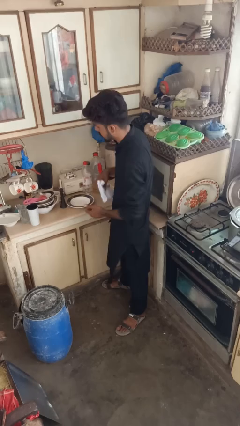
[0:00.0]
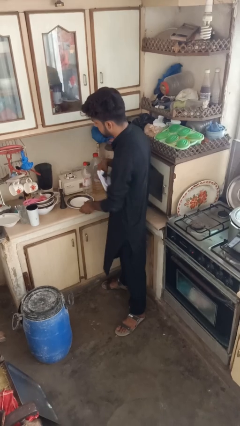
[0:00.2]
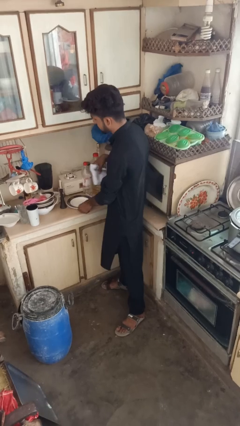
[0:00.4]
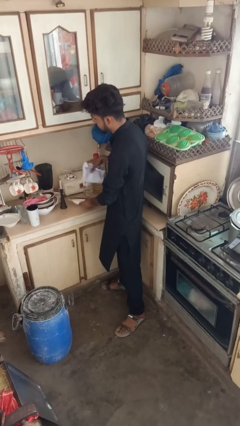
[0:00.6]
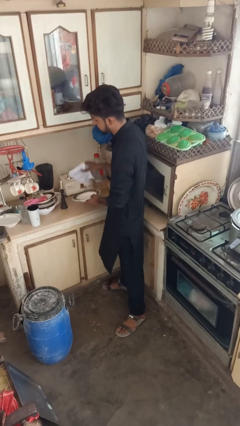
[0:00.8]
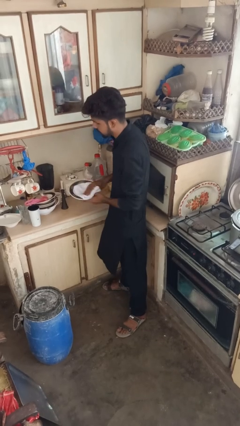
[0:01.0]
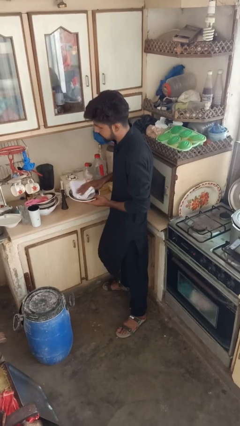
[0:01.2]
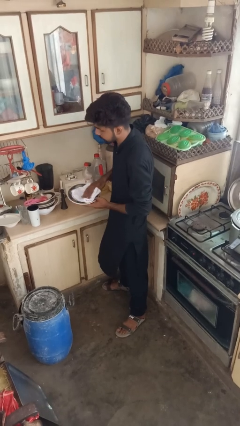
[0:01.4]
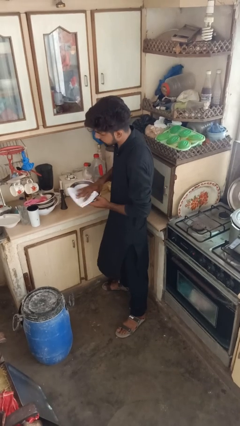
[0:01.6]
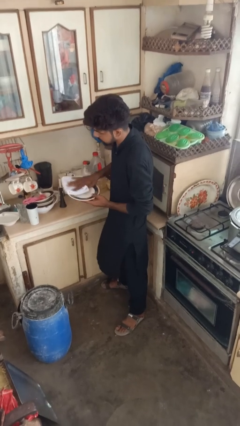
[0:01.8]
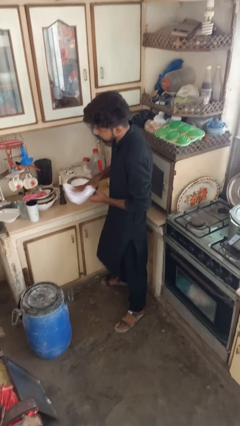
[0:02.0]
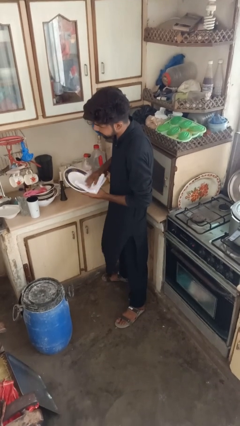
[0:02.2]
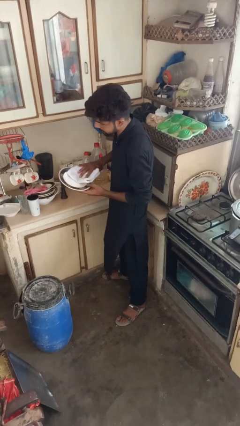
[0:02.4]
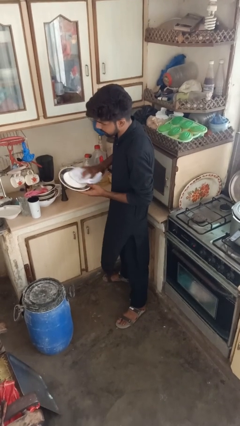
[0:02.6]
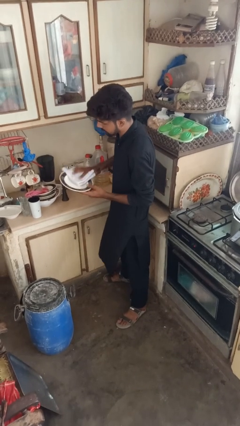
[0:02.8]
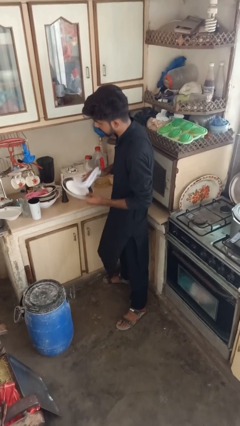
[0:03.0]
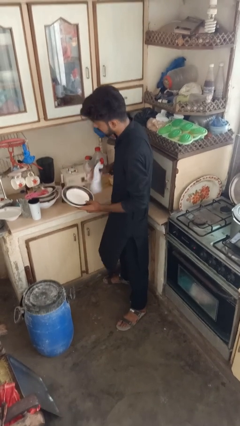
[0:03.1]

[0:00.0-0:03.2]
person dries dish

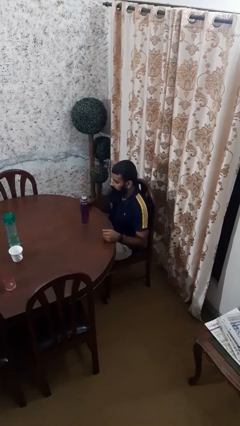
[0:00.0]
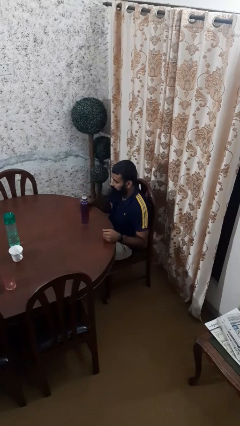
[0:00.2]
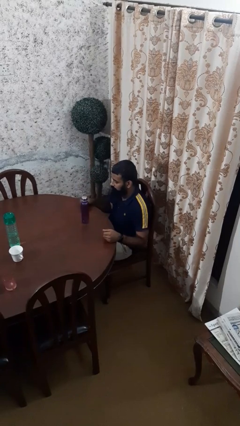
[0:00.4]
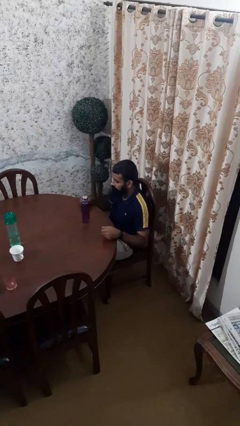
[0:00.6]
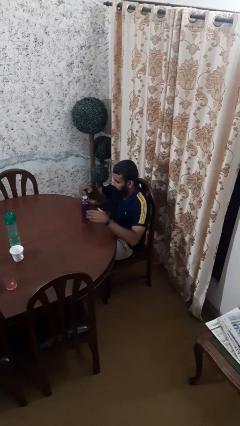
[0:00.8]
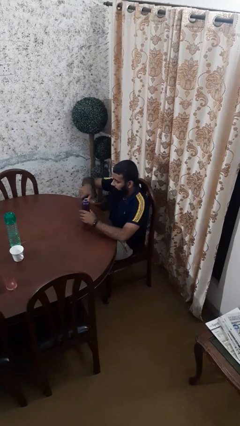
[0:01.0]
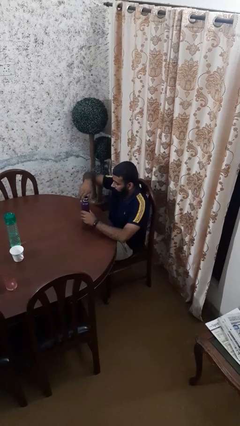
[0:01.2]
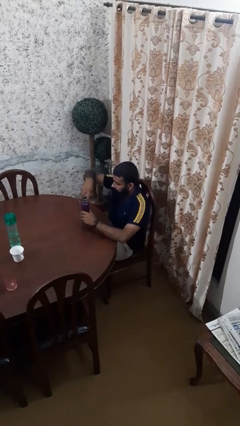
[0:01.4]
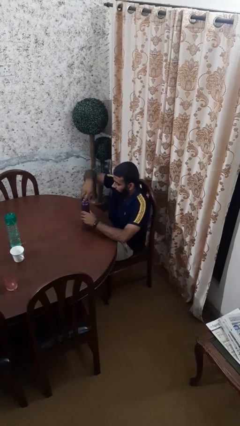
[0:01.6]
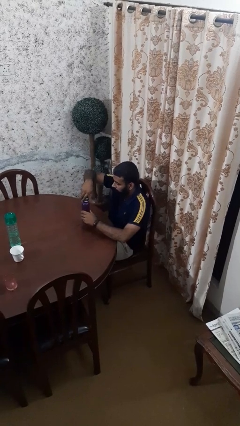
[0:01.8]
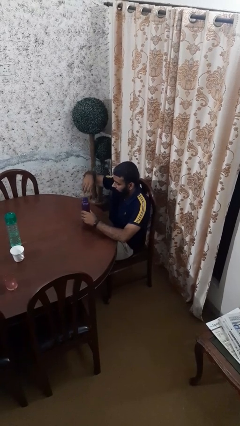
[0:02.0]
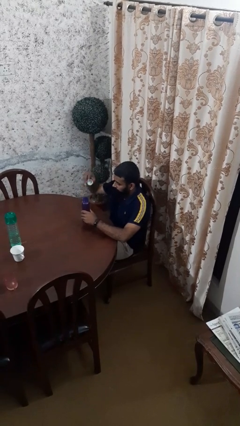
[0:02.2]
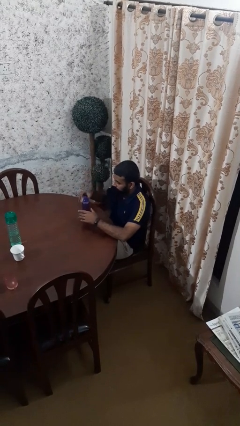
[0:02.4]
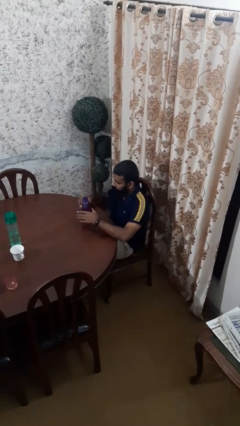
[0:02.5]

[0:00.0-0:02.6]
person unscrews lid from bottle

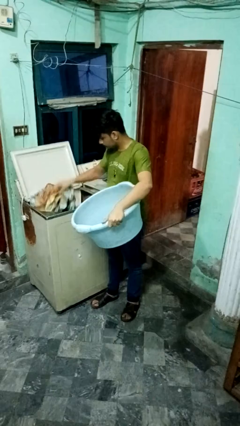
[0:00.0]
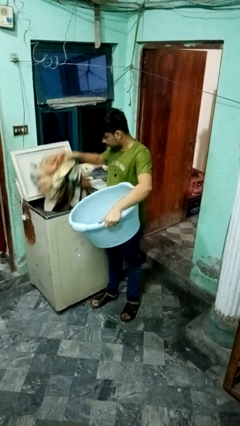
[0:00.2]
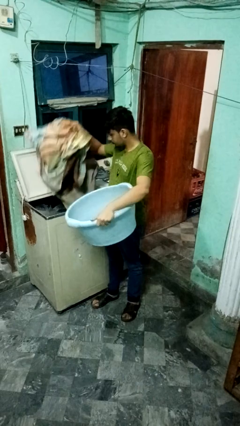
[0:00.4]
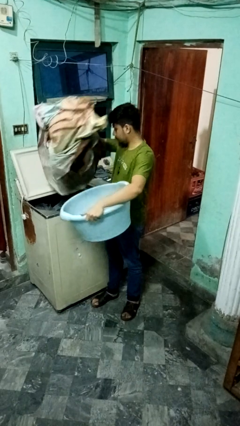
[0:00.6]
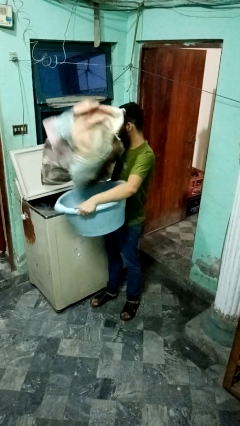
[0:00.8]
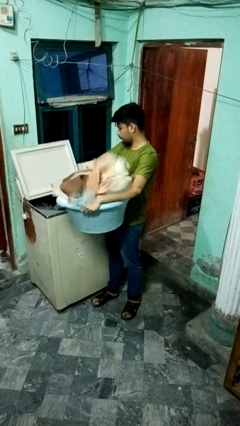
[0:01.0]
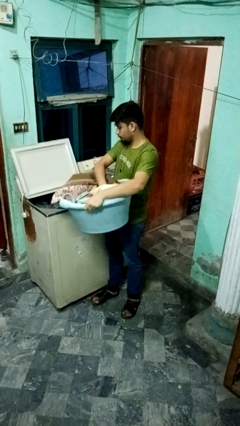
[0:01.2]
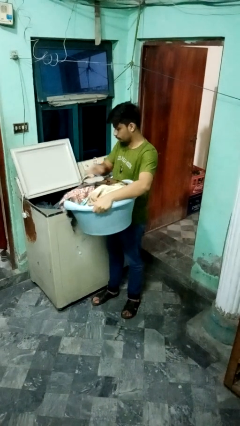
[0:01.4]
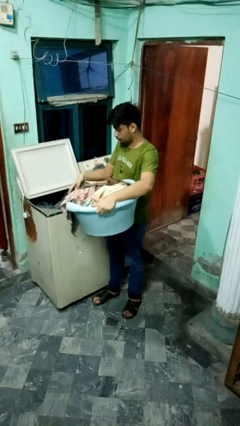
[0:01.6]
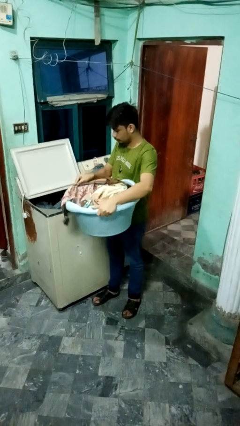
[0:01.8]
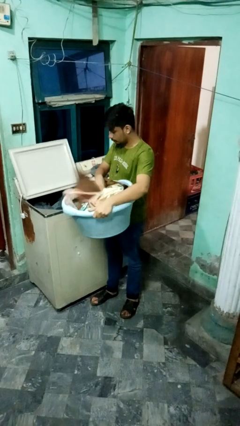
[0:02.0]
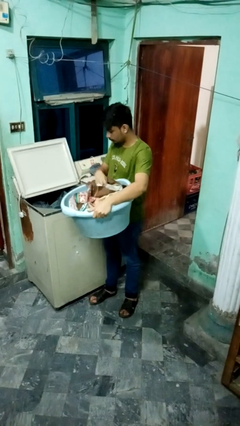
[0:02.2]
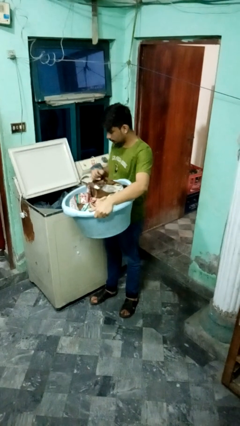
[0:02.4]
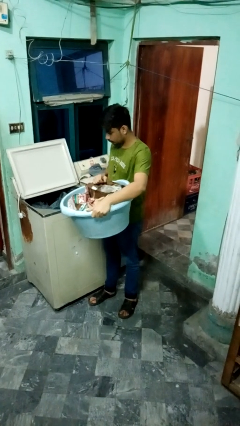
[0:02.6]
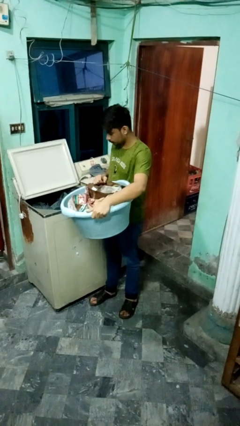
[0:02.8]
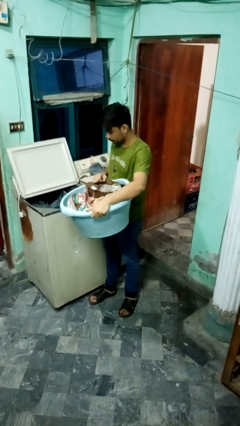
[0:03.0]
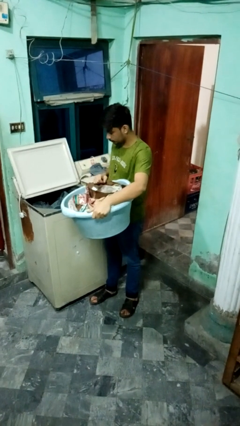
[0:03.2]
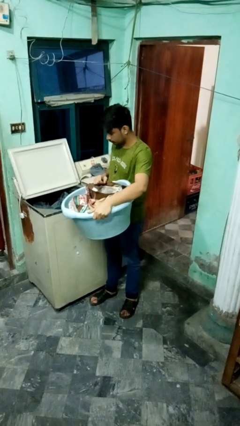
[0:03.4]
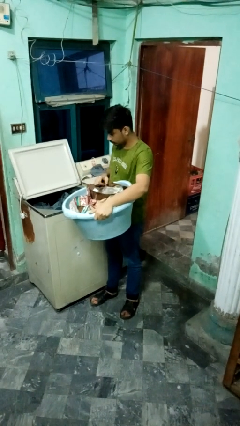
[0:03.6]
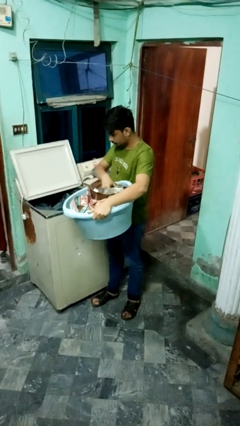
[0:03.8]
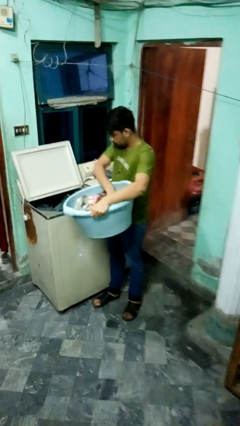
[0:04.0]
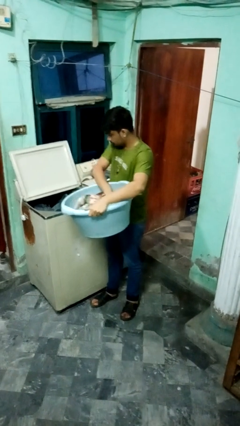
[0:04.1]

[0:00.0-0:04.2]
person unloads clotheswasher

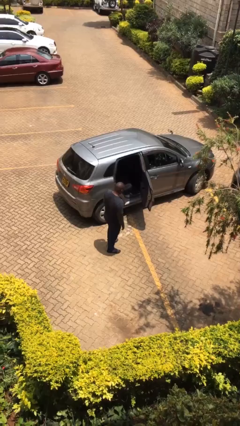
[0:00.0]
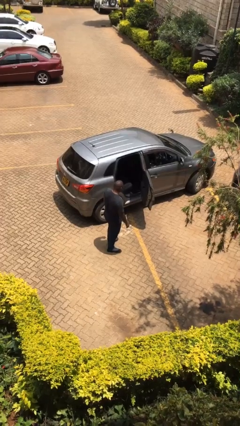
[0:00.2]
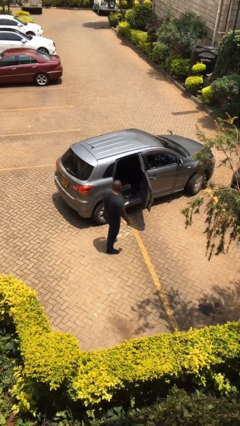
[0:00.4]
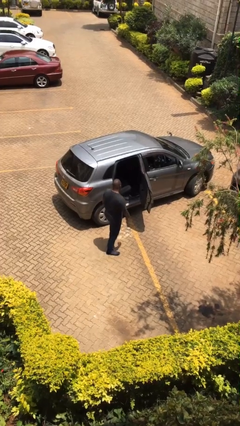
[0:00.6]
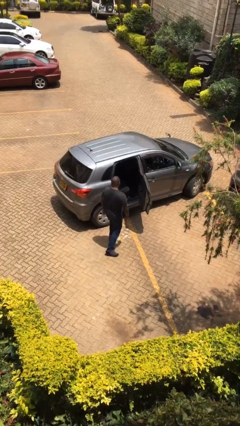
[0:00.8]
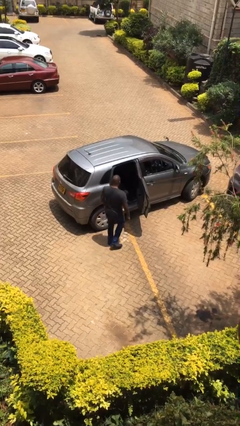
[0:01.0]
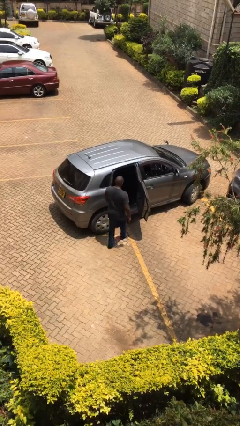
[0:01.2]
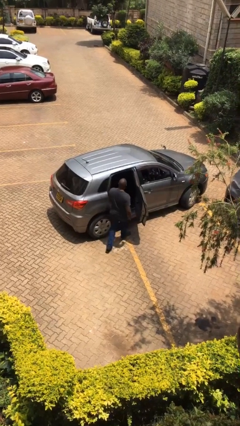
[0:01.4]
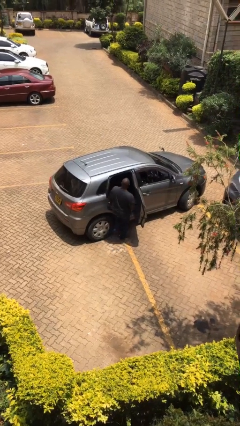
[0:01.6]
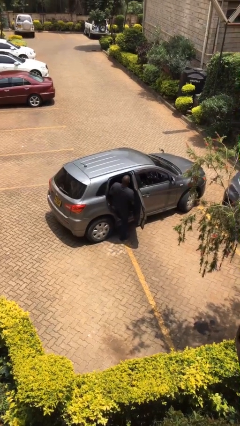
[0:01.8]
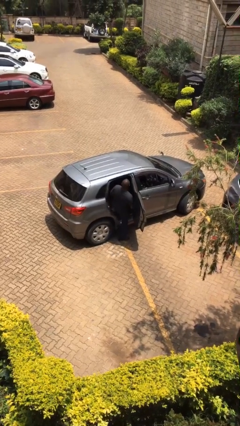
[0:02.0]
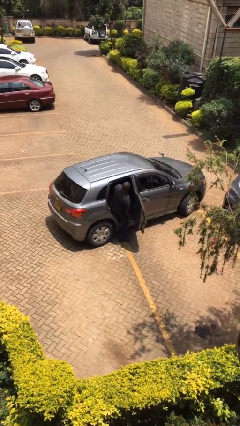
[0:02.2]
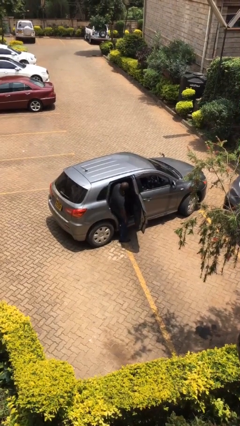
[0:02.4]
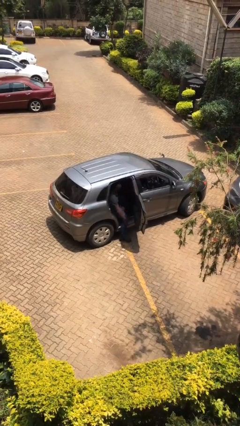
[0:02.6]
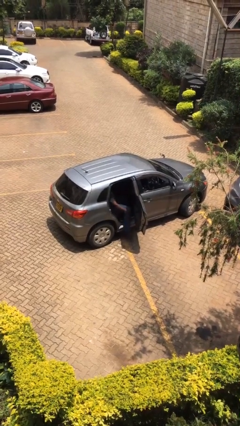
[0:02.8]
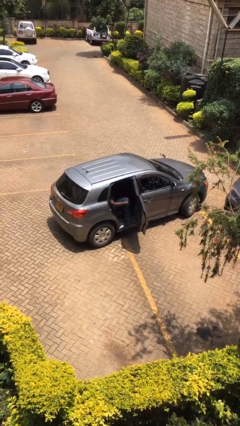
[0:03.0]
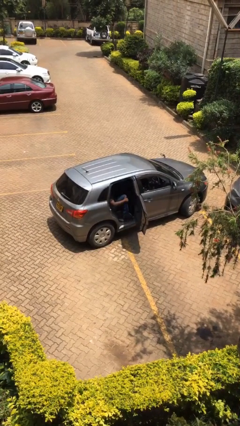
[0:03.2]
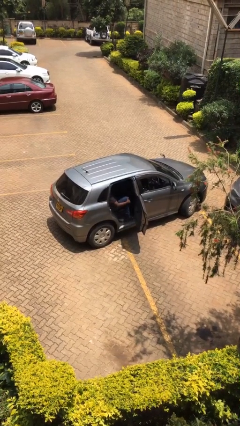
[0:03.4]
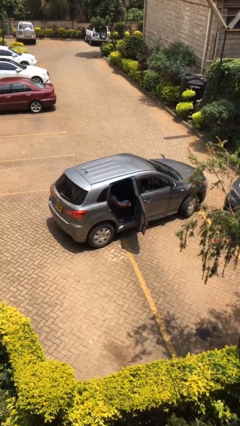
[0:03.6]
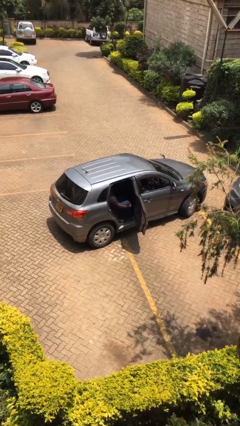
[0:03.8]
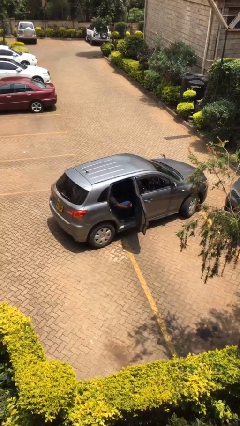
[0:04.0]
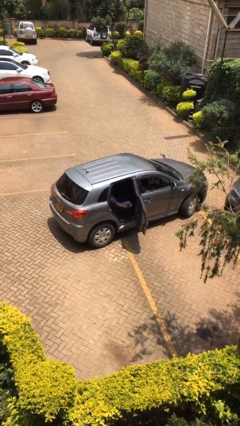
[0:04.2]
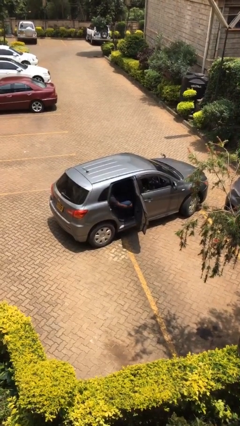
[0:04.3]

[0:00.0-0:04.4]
person enters car

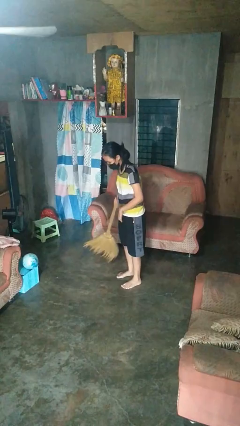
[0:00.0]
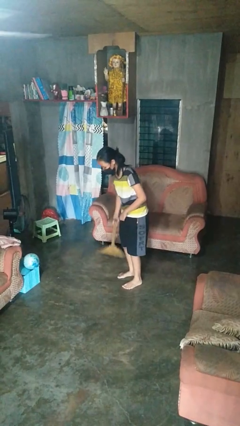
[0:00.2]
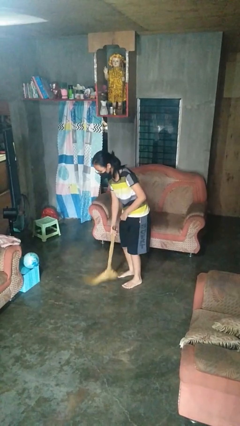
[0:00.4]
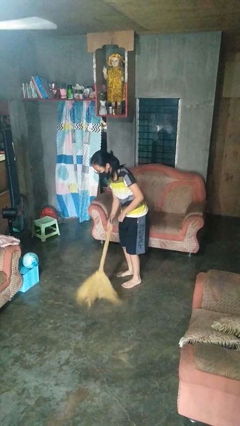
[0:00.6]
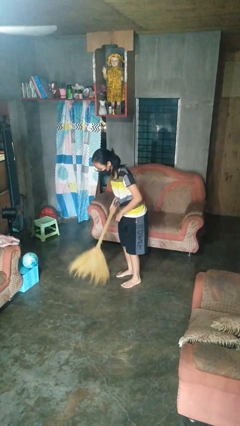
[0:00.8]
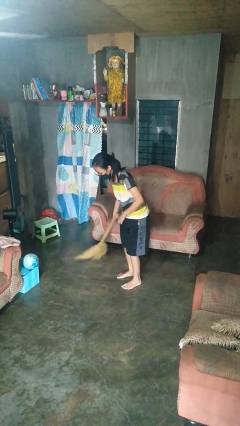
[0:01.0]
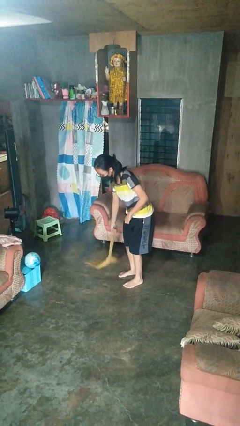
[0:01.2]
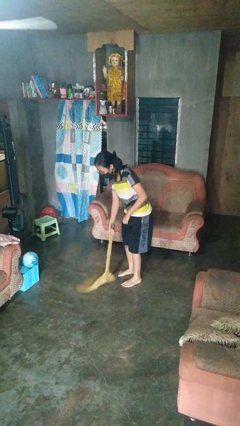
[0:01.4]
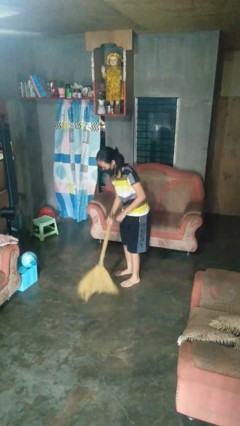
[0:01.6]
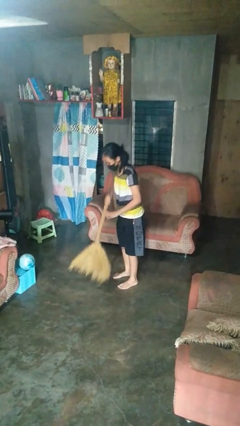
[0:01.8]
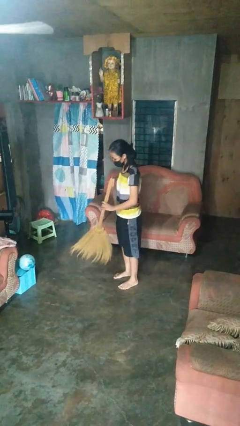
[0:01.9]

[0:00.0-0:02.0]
person sweeps floor

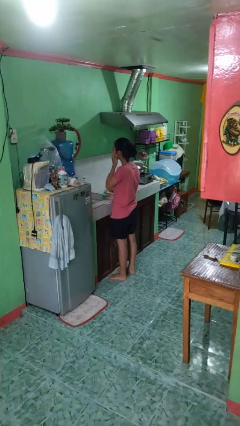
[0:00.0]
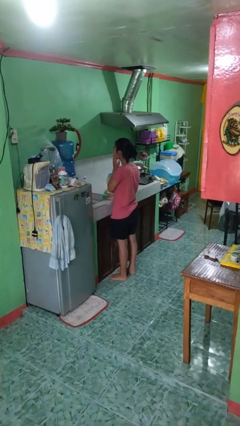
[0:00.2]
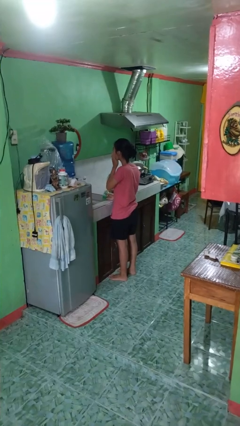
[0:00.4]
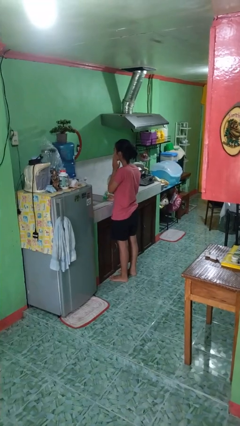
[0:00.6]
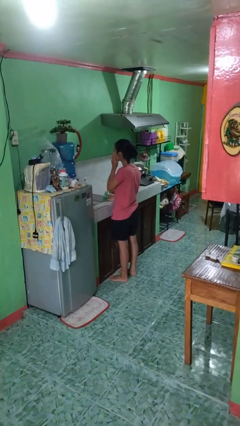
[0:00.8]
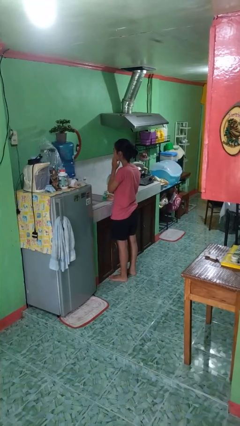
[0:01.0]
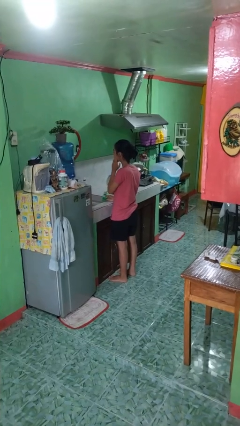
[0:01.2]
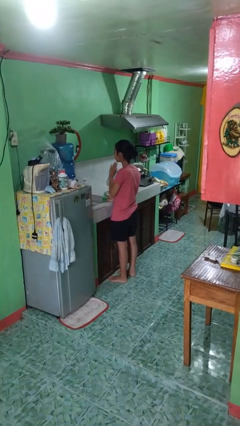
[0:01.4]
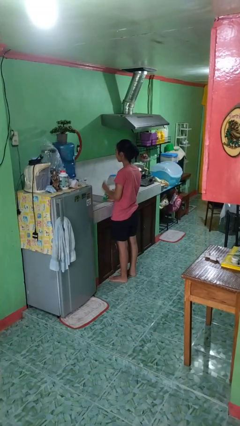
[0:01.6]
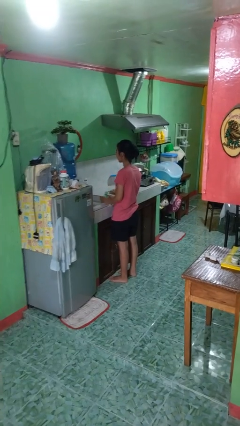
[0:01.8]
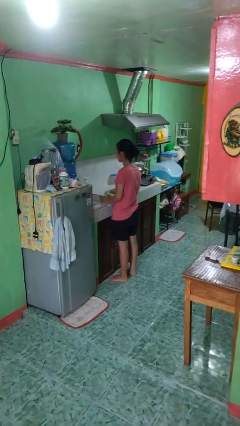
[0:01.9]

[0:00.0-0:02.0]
person applies facial moisturizer
